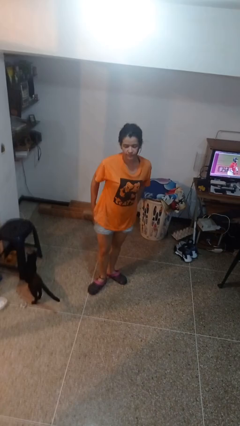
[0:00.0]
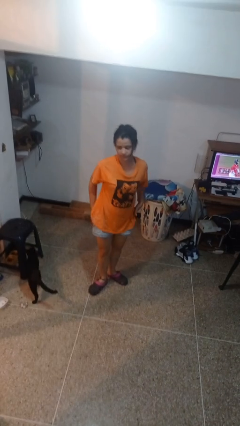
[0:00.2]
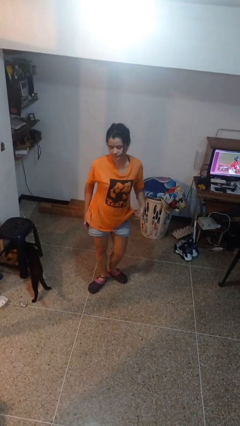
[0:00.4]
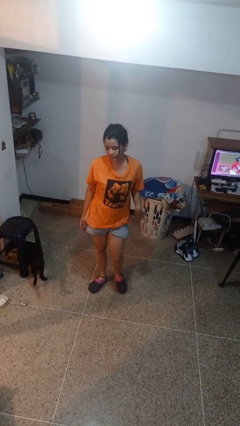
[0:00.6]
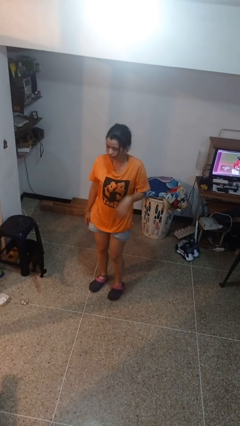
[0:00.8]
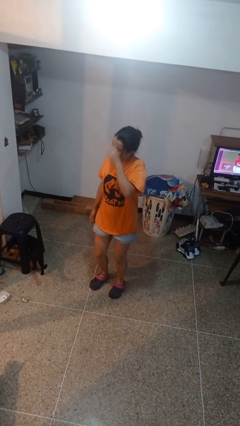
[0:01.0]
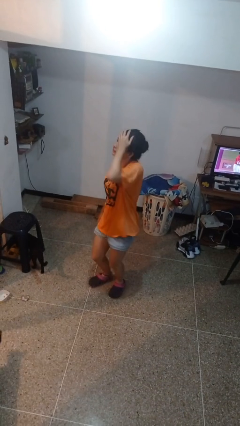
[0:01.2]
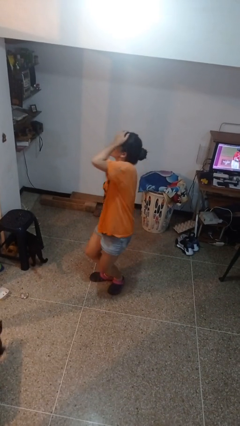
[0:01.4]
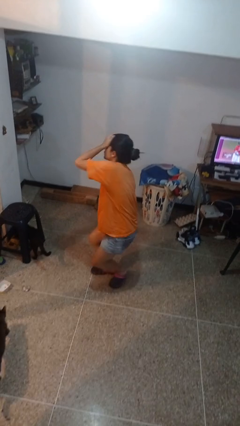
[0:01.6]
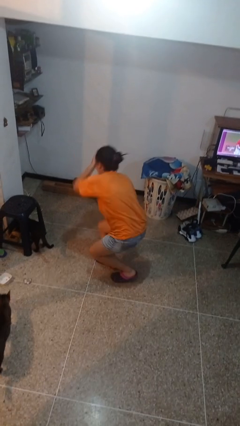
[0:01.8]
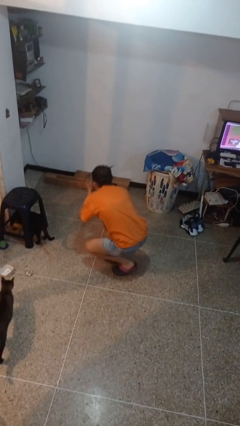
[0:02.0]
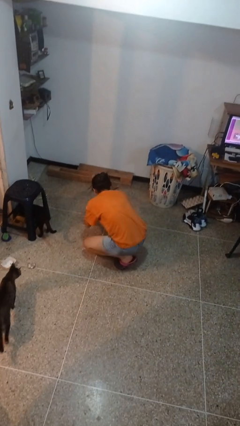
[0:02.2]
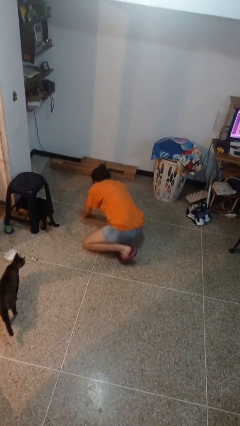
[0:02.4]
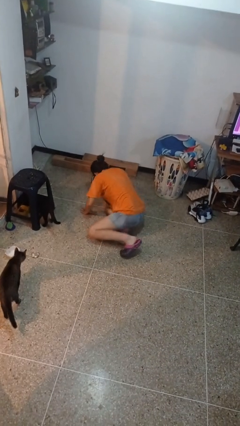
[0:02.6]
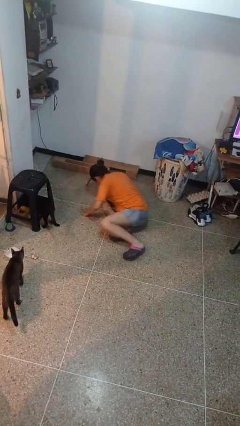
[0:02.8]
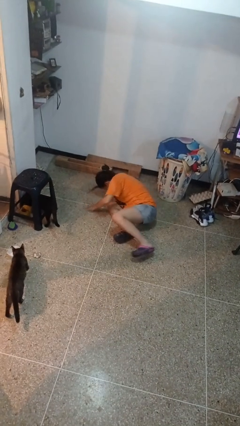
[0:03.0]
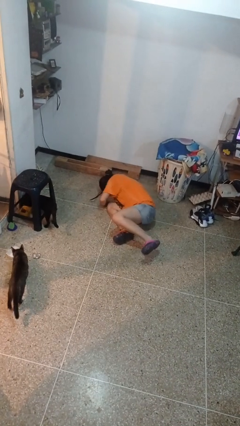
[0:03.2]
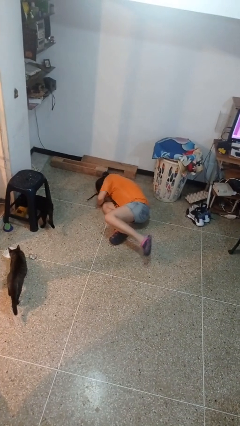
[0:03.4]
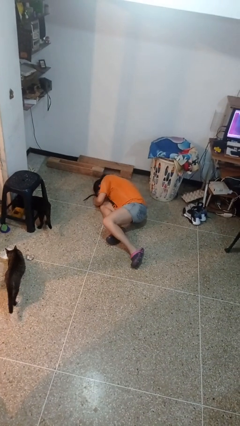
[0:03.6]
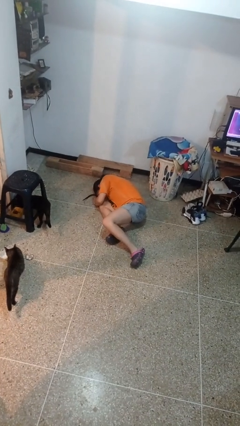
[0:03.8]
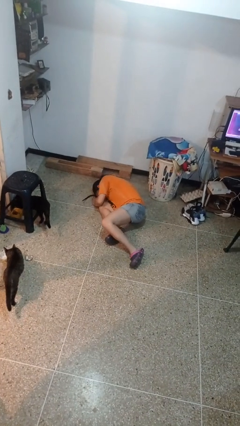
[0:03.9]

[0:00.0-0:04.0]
person falls while standing

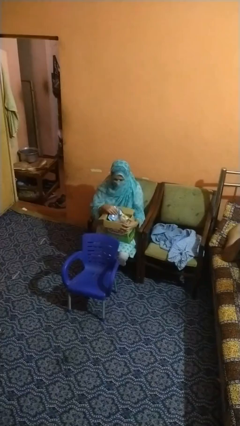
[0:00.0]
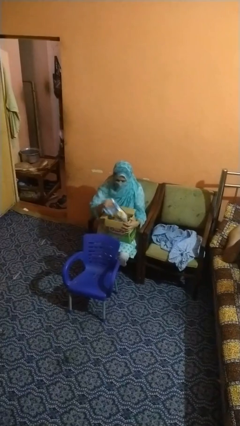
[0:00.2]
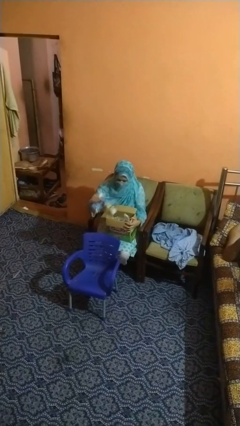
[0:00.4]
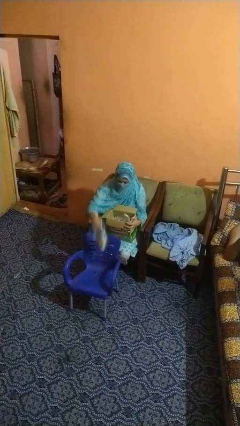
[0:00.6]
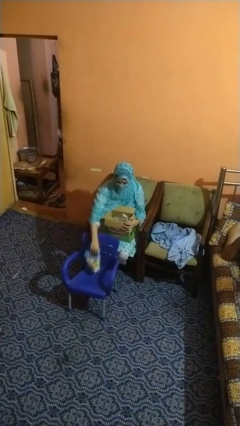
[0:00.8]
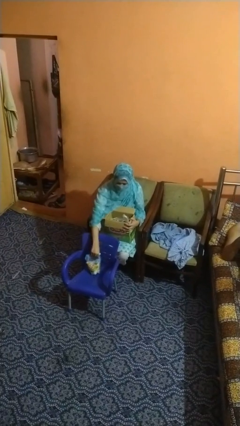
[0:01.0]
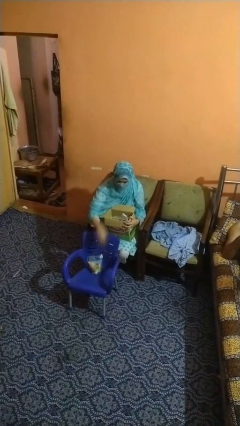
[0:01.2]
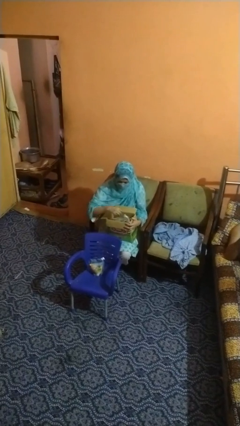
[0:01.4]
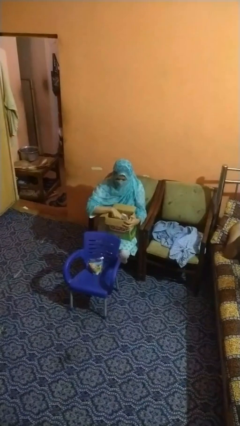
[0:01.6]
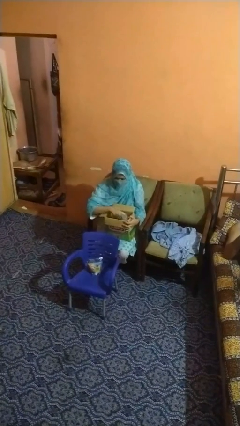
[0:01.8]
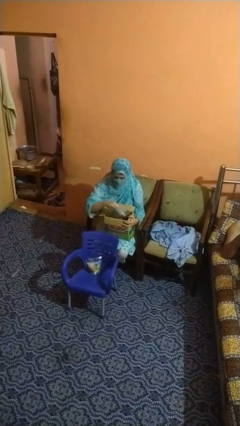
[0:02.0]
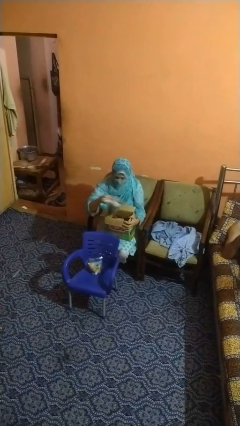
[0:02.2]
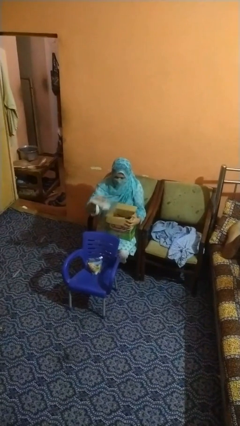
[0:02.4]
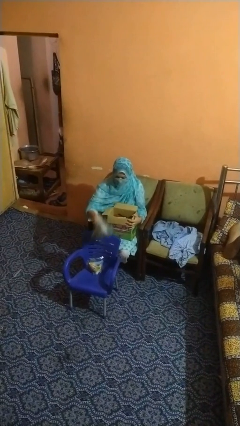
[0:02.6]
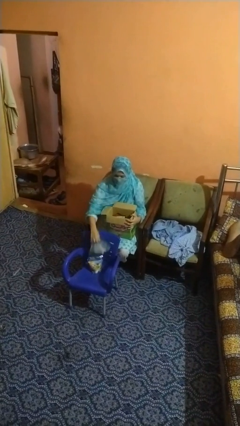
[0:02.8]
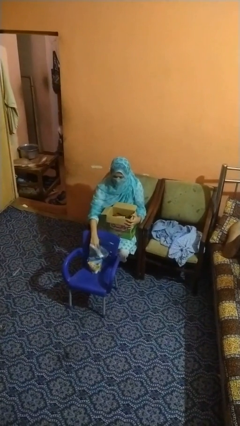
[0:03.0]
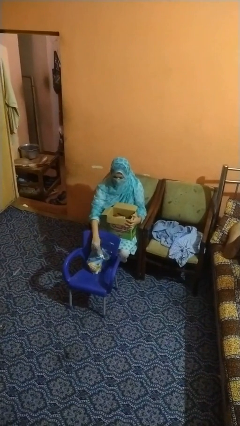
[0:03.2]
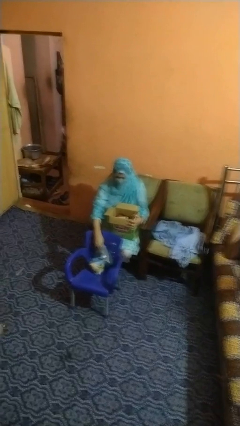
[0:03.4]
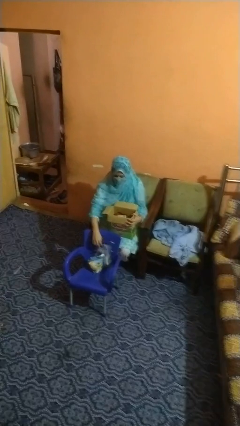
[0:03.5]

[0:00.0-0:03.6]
person takes object from box

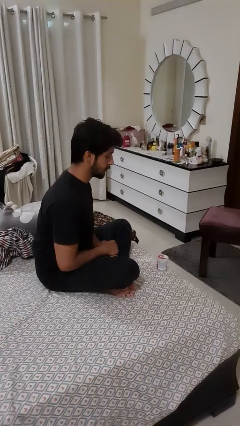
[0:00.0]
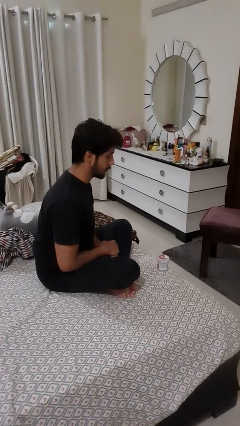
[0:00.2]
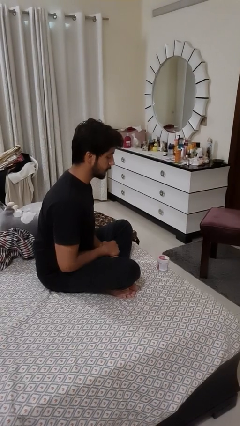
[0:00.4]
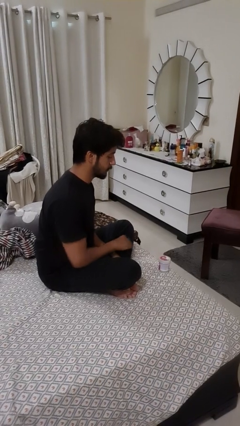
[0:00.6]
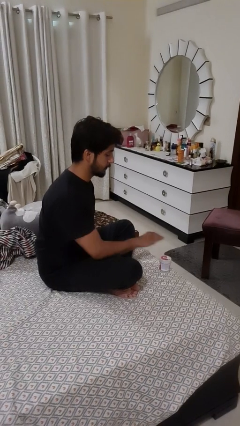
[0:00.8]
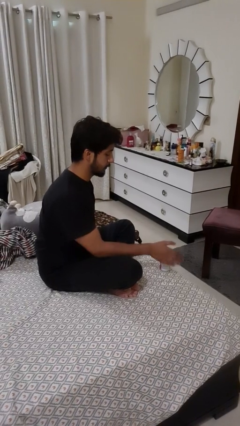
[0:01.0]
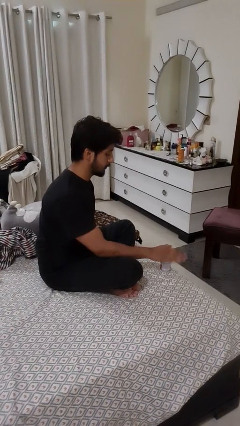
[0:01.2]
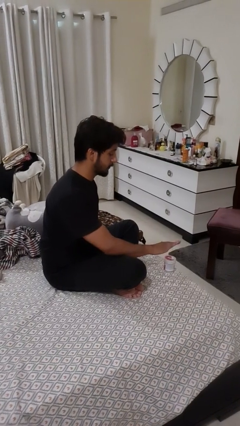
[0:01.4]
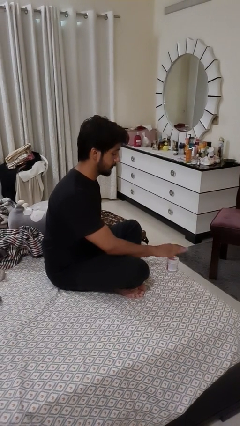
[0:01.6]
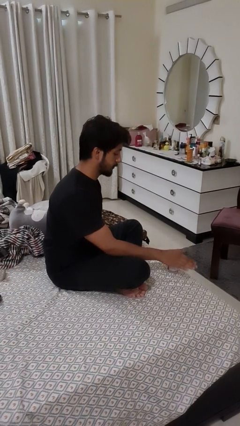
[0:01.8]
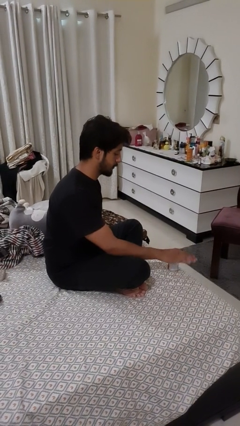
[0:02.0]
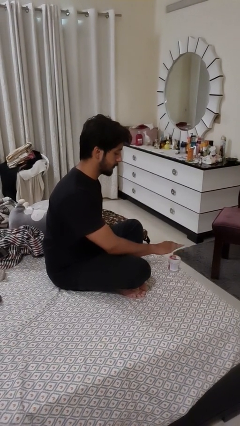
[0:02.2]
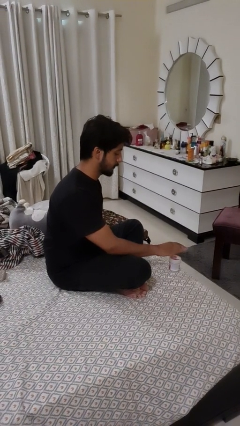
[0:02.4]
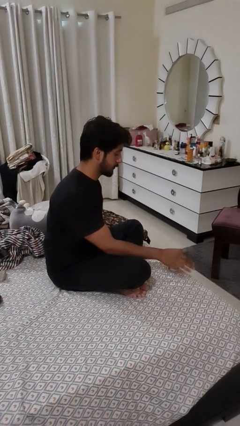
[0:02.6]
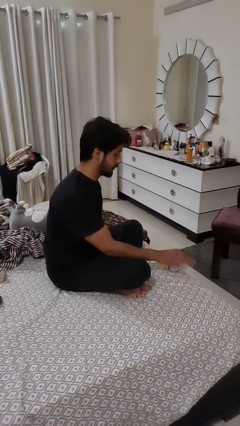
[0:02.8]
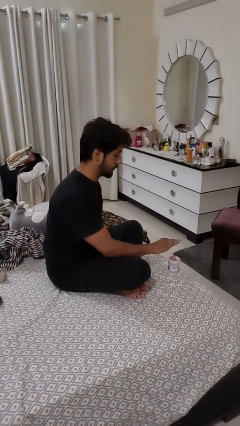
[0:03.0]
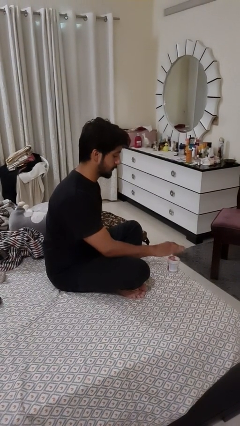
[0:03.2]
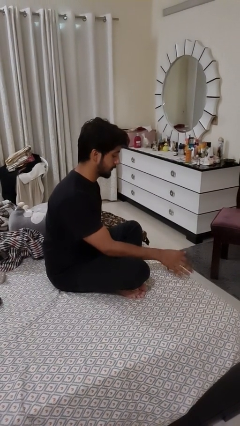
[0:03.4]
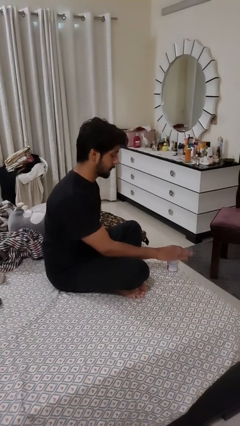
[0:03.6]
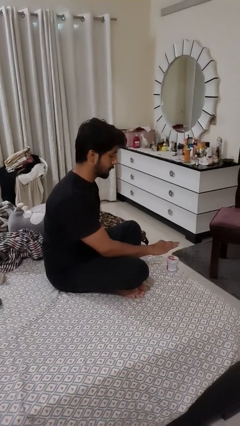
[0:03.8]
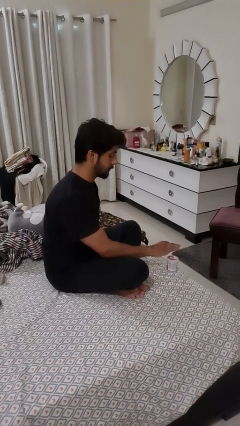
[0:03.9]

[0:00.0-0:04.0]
person waves hand over object

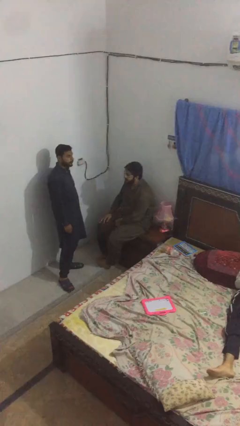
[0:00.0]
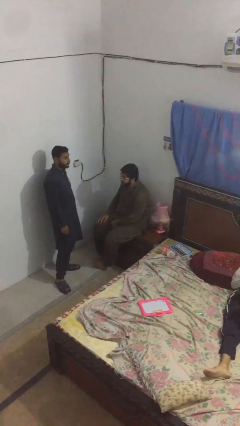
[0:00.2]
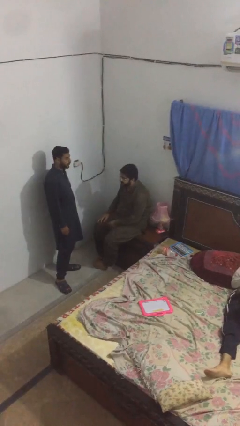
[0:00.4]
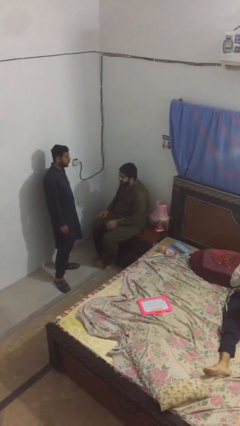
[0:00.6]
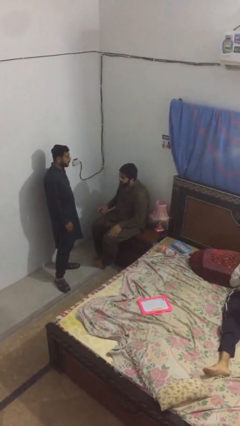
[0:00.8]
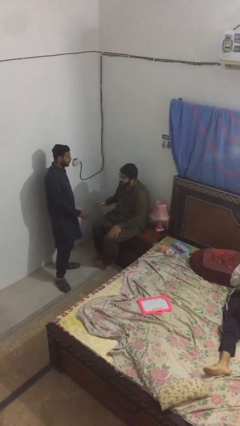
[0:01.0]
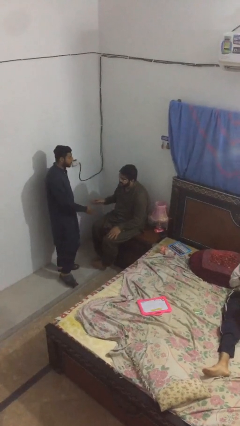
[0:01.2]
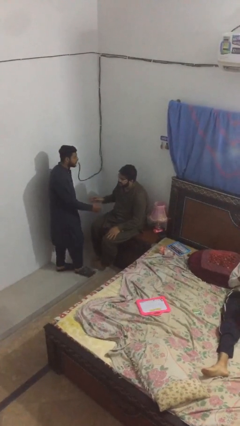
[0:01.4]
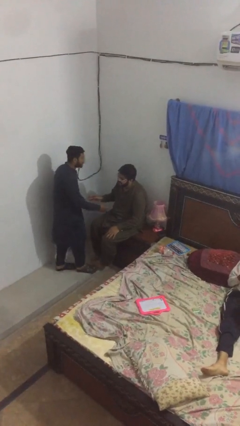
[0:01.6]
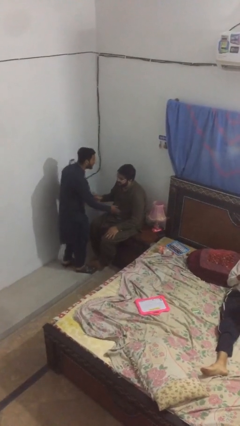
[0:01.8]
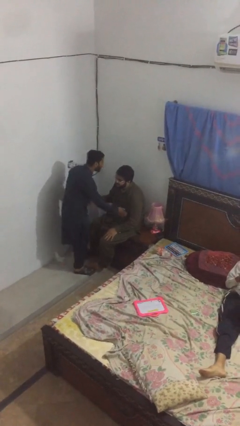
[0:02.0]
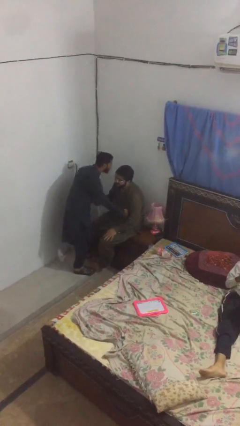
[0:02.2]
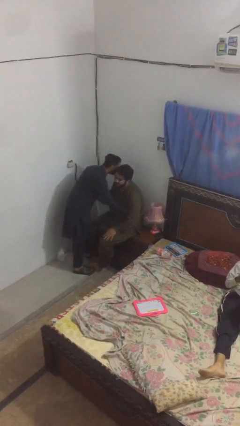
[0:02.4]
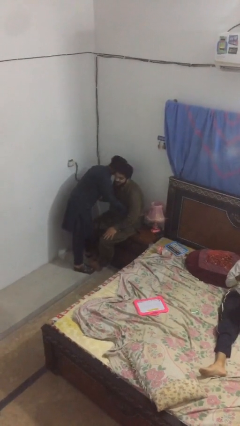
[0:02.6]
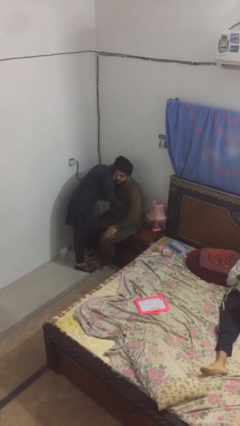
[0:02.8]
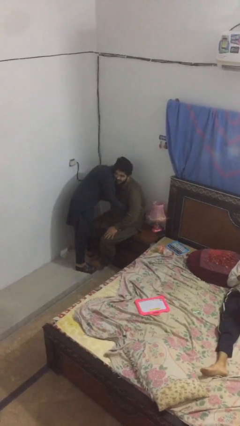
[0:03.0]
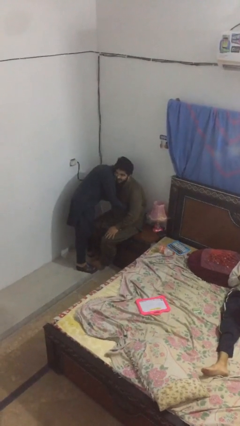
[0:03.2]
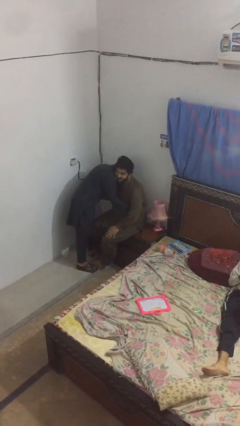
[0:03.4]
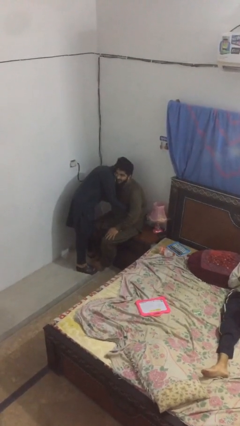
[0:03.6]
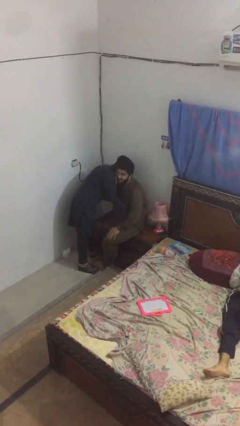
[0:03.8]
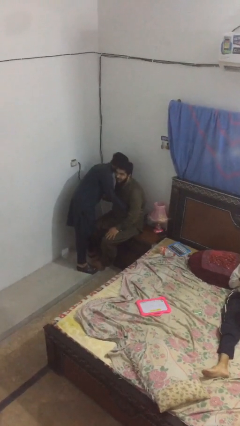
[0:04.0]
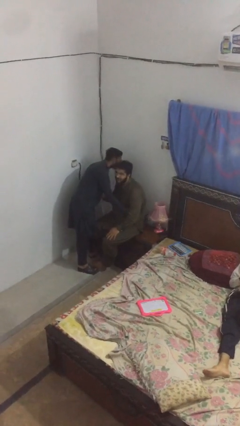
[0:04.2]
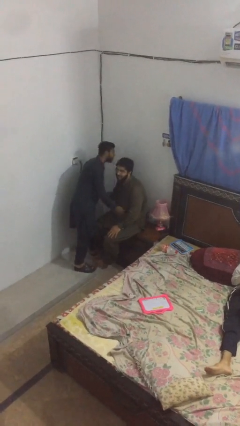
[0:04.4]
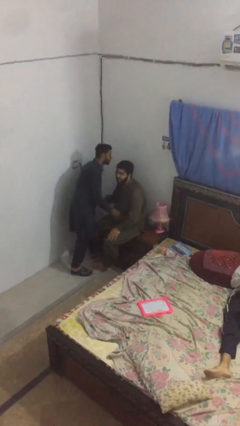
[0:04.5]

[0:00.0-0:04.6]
person embraces person

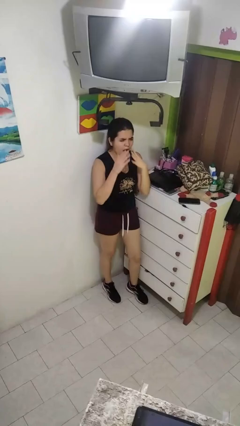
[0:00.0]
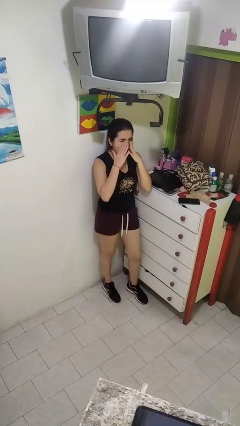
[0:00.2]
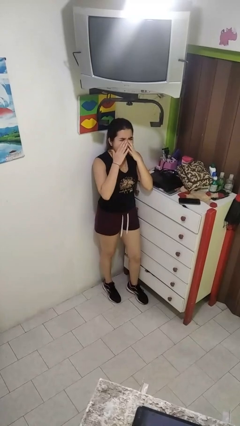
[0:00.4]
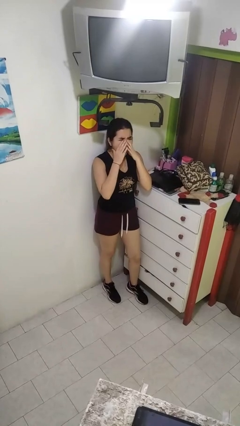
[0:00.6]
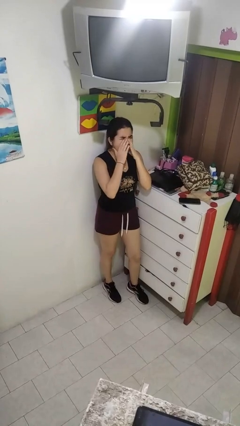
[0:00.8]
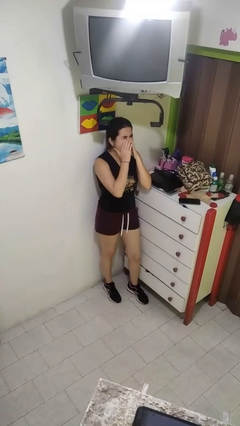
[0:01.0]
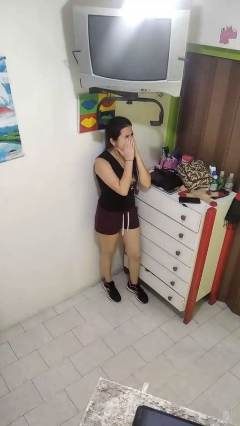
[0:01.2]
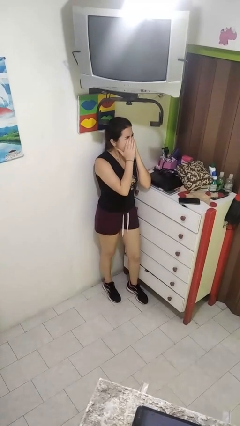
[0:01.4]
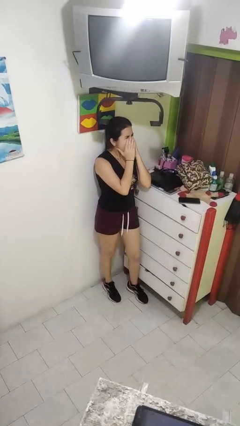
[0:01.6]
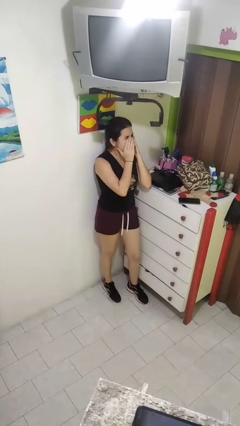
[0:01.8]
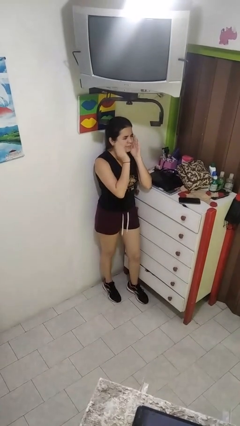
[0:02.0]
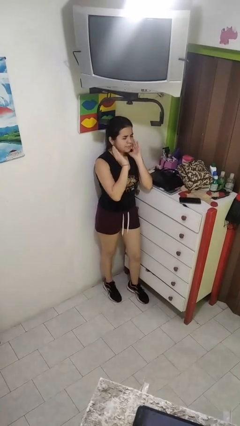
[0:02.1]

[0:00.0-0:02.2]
person yawns
